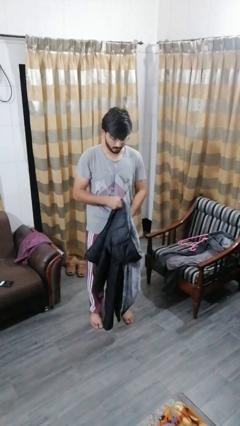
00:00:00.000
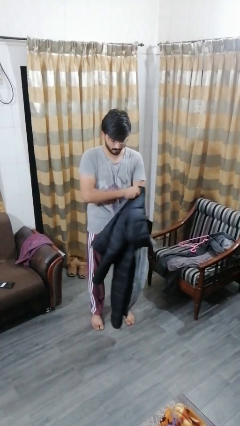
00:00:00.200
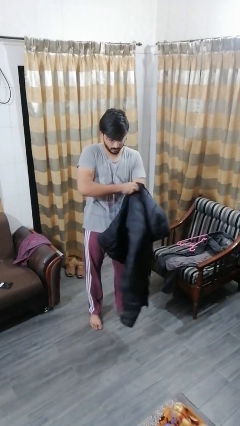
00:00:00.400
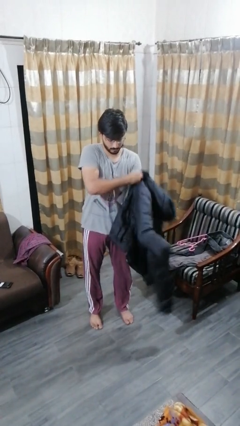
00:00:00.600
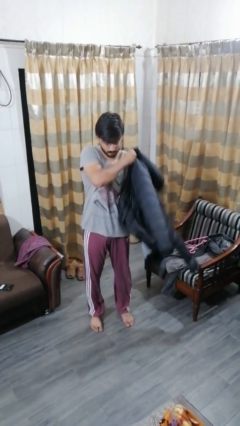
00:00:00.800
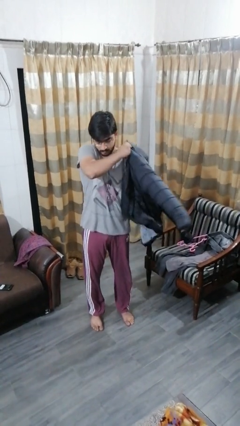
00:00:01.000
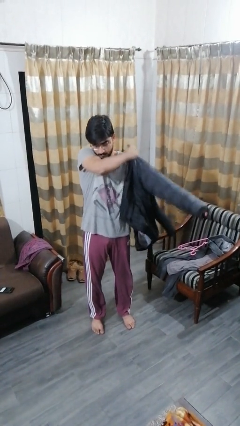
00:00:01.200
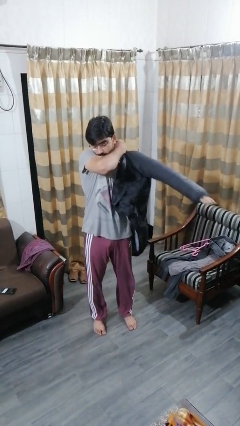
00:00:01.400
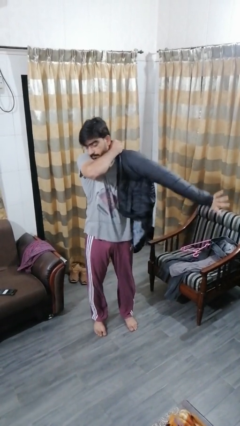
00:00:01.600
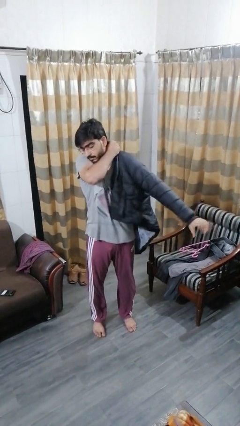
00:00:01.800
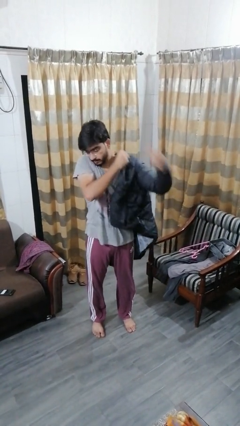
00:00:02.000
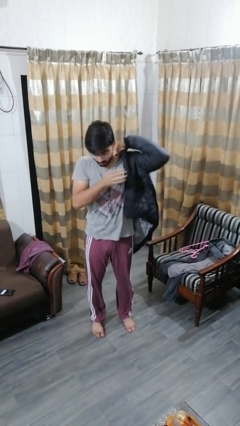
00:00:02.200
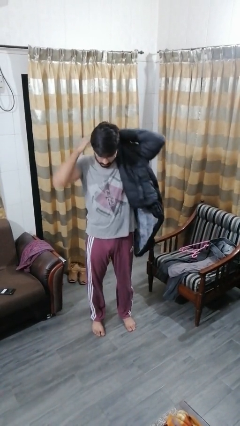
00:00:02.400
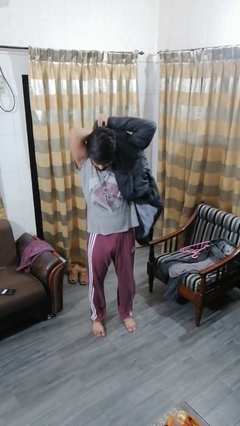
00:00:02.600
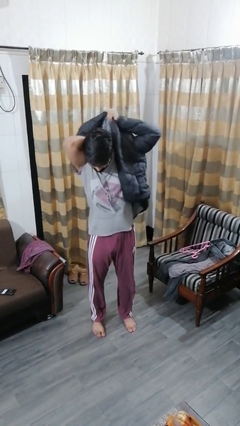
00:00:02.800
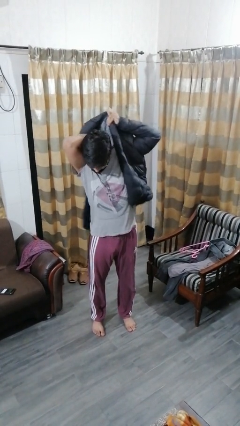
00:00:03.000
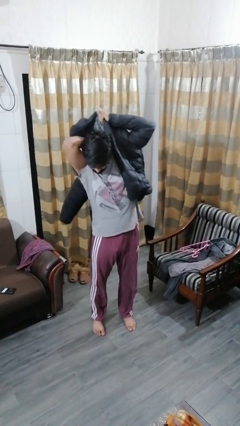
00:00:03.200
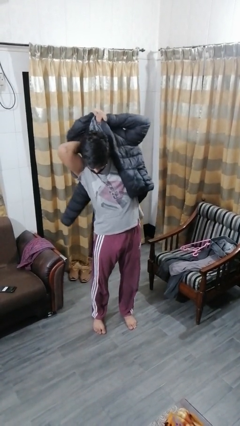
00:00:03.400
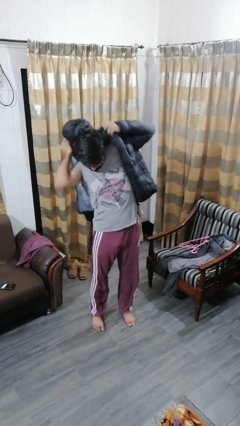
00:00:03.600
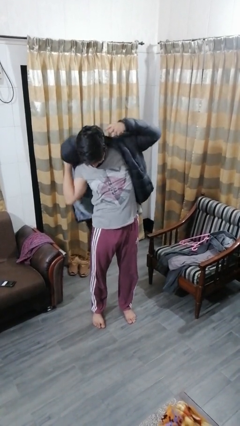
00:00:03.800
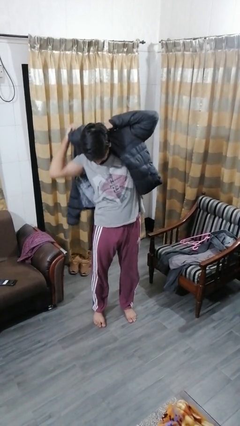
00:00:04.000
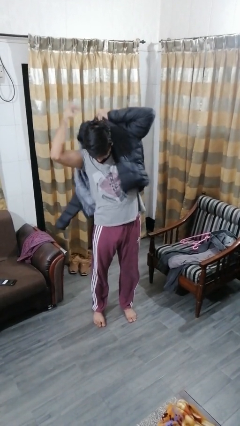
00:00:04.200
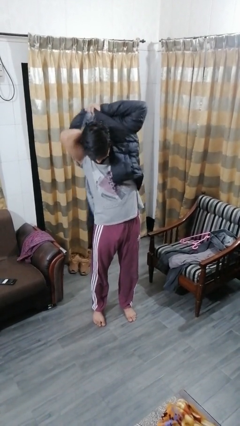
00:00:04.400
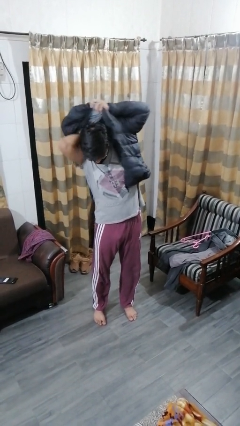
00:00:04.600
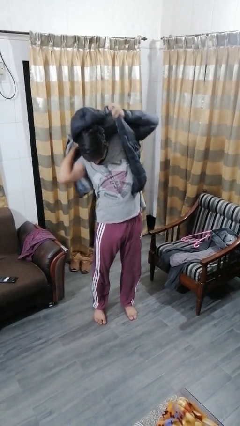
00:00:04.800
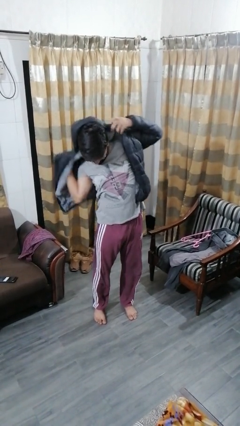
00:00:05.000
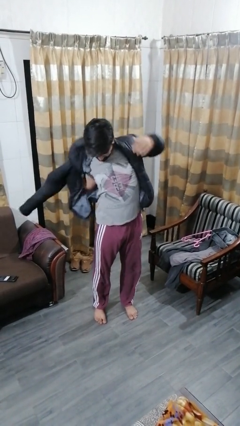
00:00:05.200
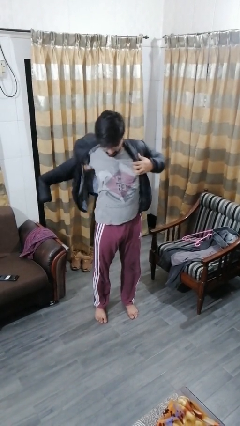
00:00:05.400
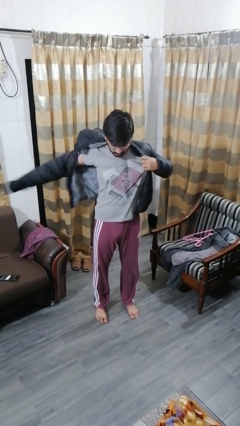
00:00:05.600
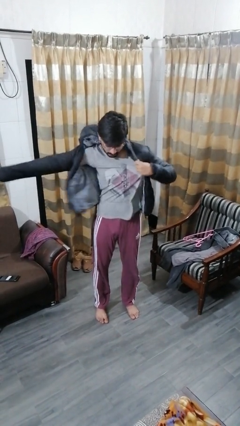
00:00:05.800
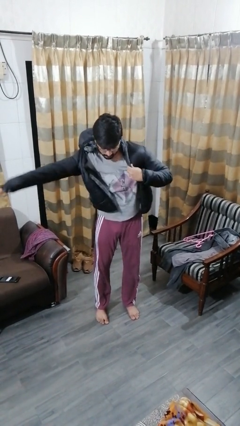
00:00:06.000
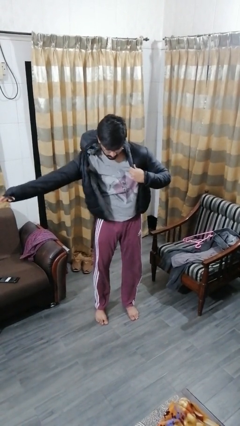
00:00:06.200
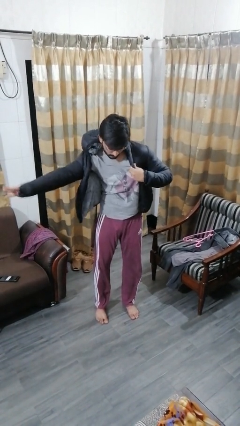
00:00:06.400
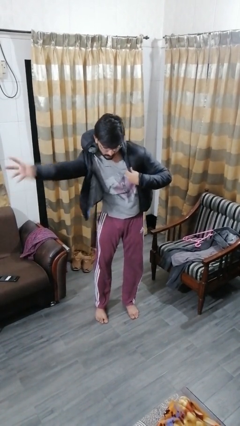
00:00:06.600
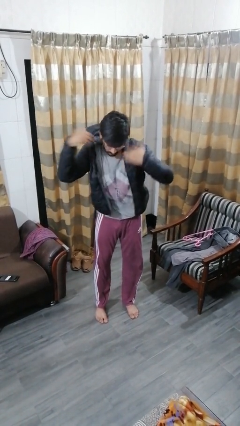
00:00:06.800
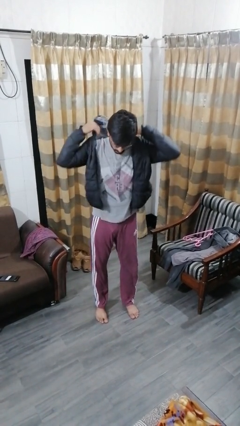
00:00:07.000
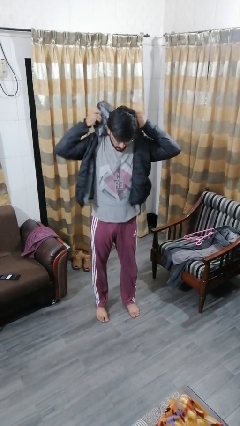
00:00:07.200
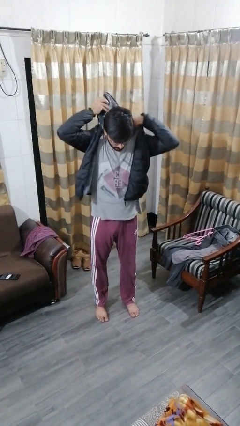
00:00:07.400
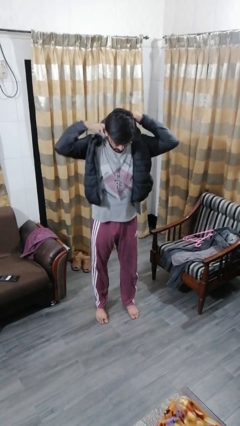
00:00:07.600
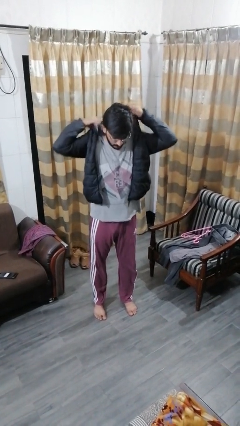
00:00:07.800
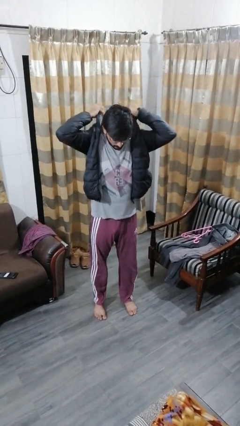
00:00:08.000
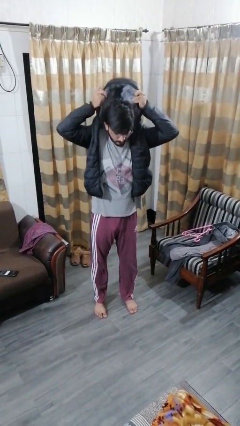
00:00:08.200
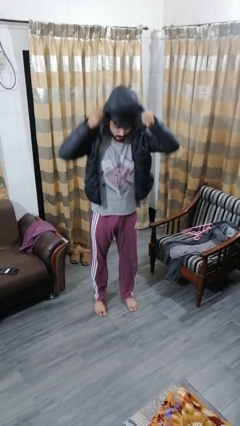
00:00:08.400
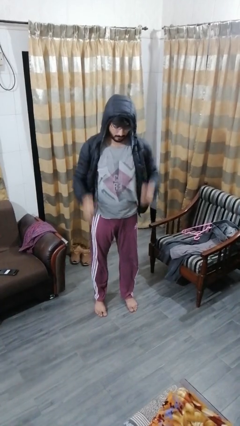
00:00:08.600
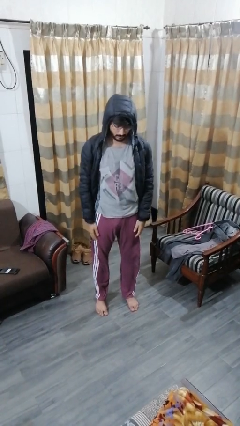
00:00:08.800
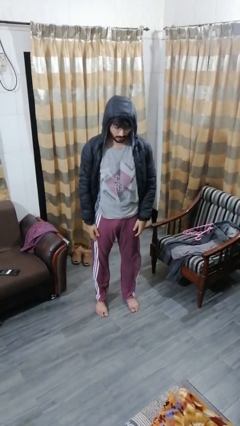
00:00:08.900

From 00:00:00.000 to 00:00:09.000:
person puts on hoodie

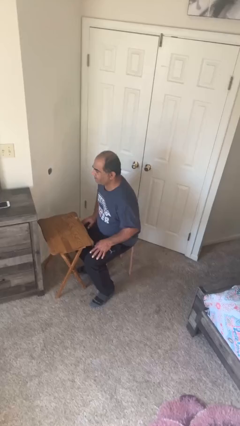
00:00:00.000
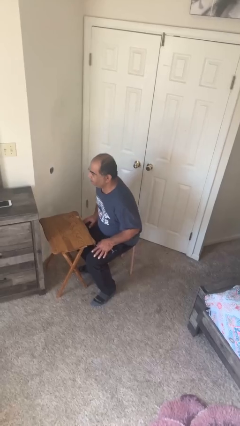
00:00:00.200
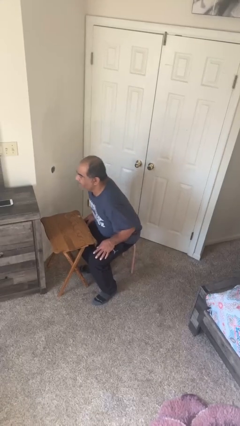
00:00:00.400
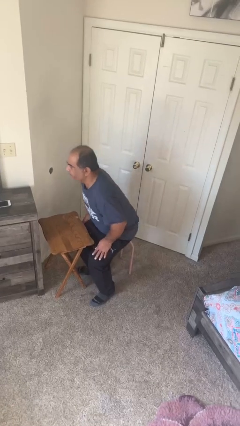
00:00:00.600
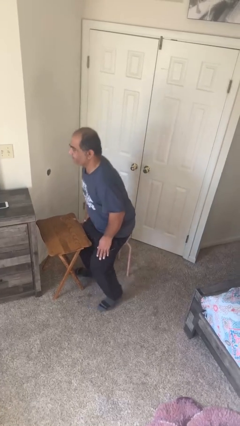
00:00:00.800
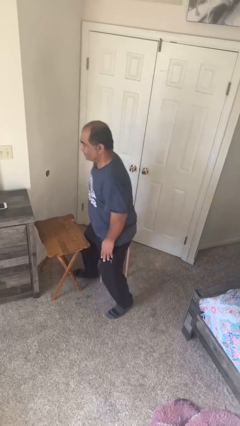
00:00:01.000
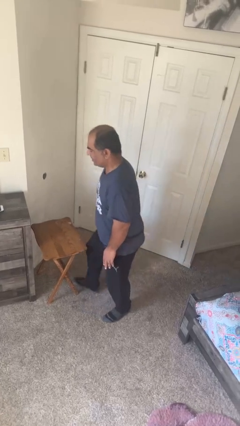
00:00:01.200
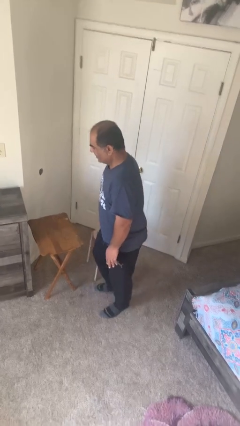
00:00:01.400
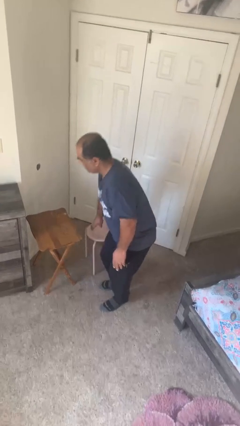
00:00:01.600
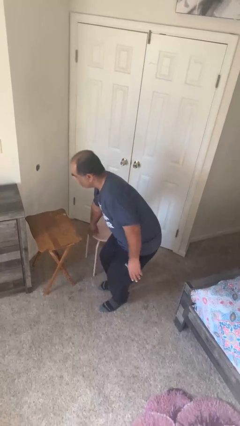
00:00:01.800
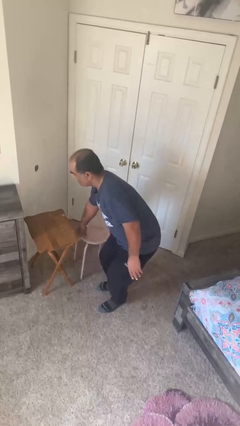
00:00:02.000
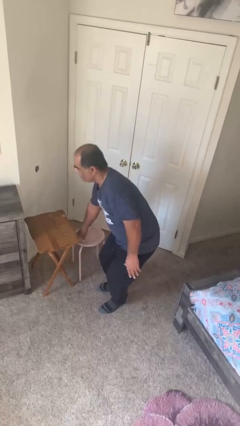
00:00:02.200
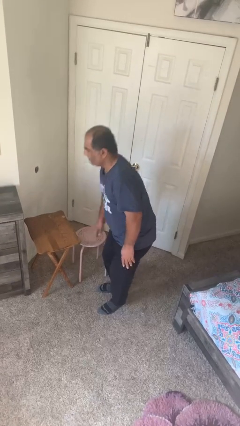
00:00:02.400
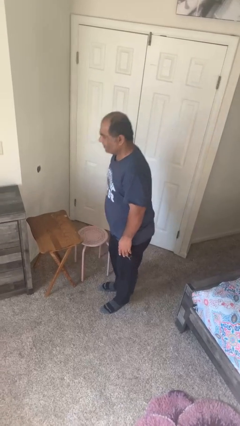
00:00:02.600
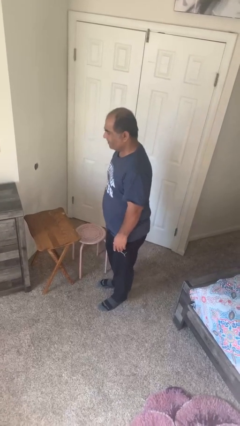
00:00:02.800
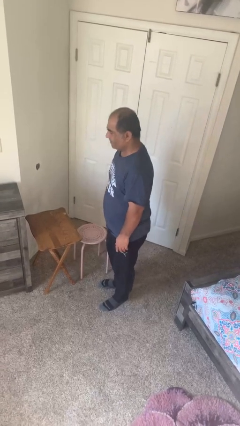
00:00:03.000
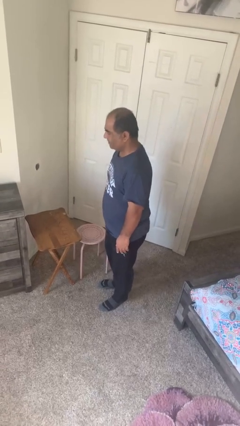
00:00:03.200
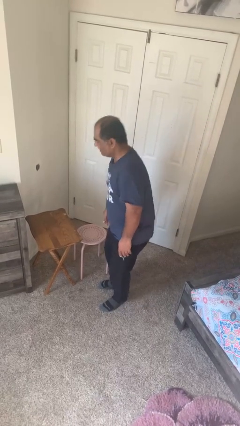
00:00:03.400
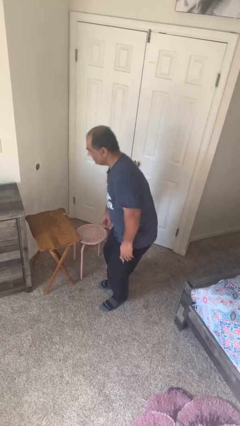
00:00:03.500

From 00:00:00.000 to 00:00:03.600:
person stands up

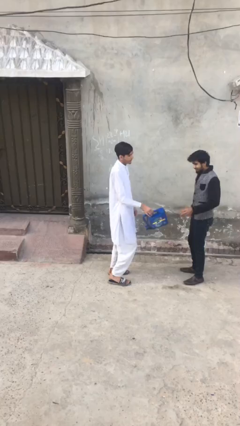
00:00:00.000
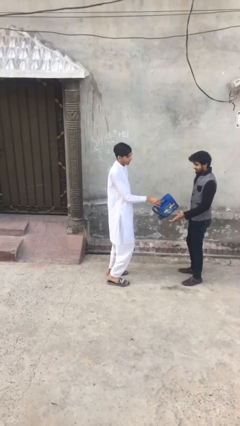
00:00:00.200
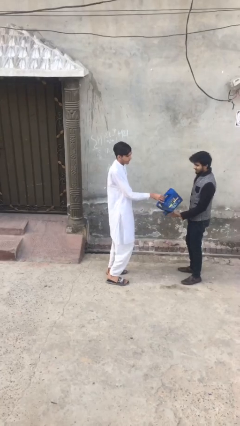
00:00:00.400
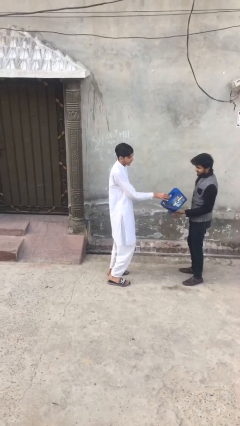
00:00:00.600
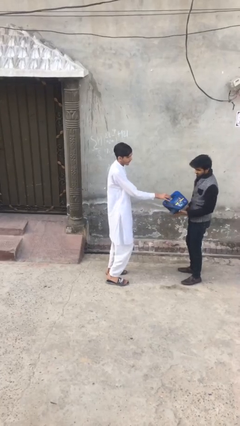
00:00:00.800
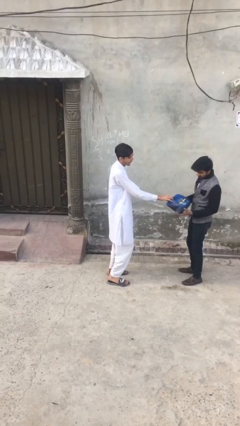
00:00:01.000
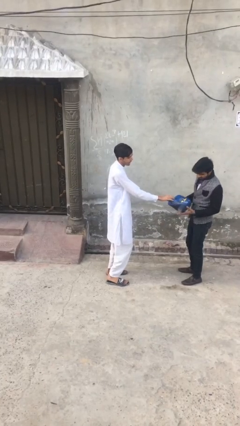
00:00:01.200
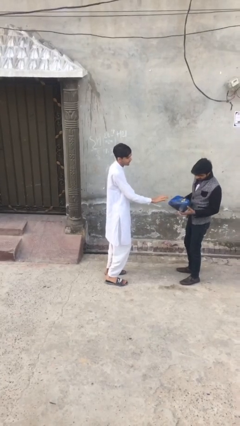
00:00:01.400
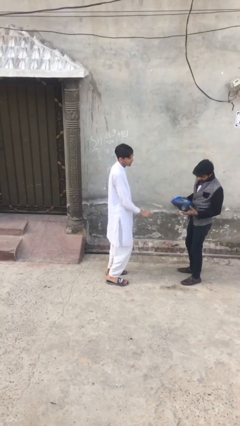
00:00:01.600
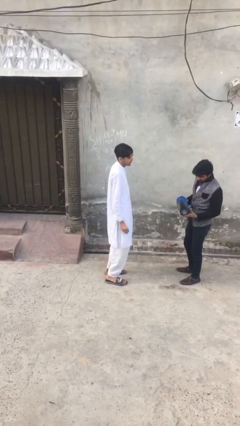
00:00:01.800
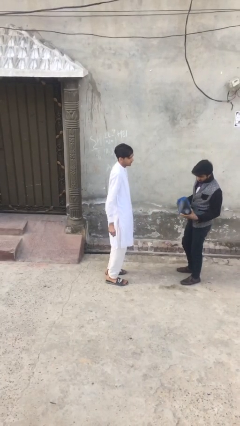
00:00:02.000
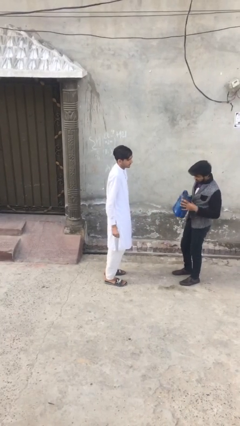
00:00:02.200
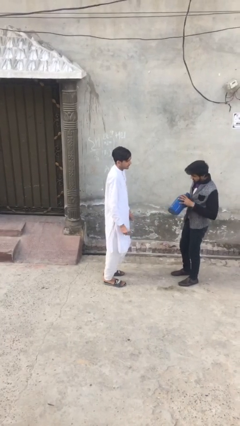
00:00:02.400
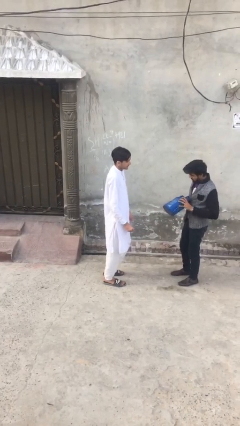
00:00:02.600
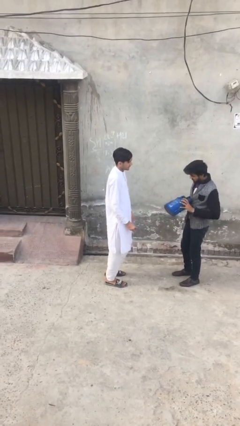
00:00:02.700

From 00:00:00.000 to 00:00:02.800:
person transfers object to person

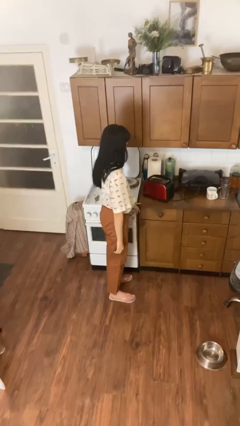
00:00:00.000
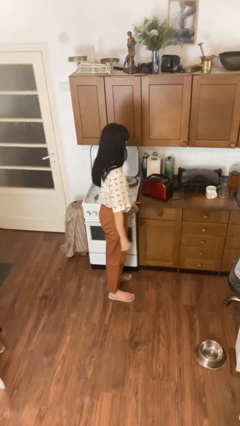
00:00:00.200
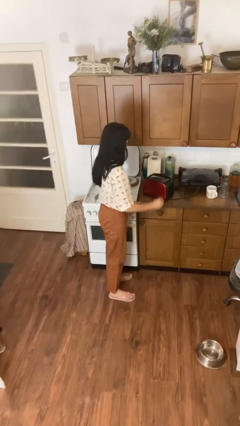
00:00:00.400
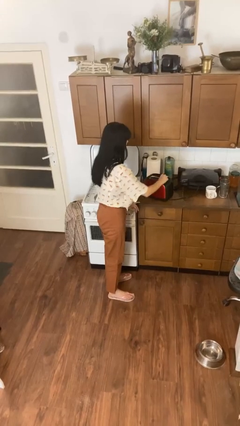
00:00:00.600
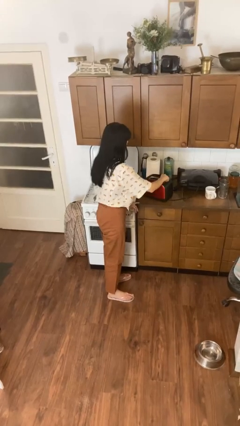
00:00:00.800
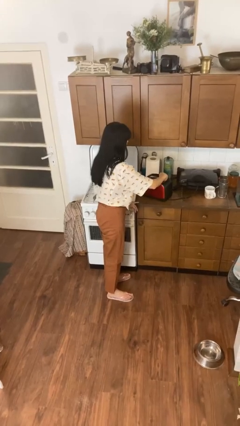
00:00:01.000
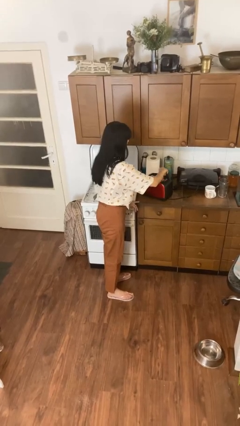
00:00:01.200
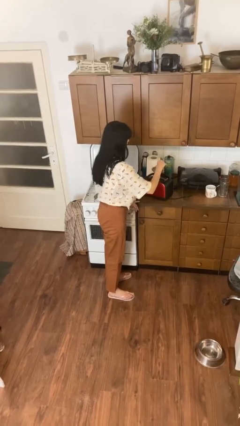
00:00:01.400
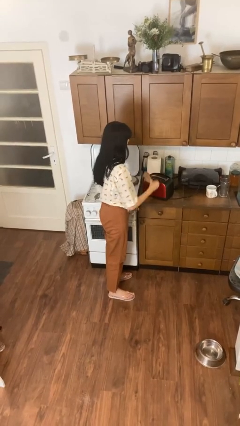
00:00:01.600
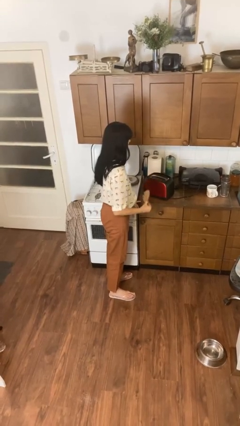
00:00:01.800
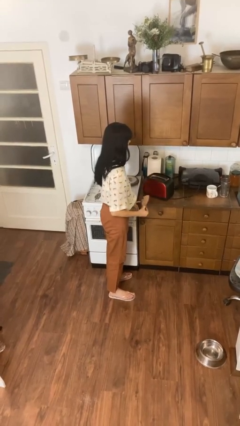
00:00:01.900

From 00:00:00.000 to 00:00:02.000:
person takes object from toaster

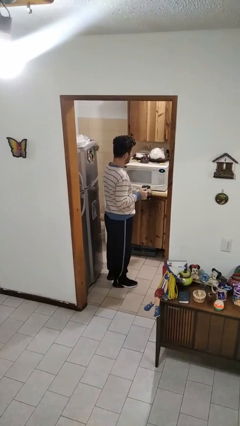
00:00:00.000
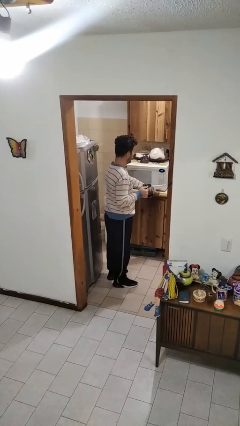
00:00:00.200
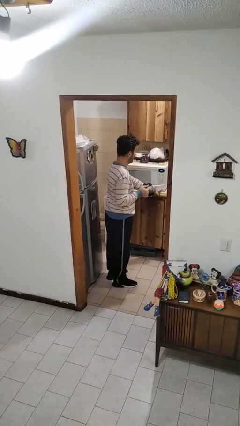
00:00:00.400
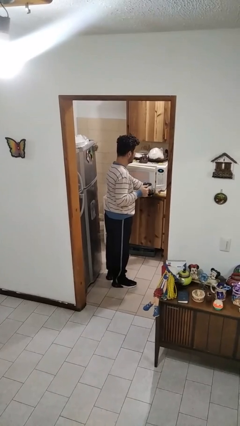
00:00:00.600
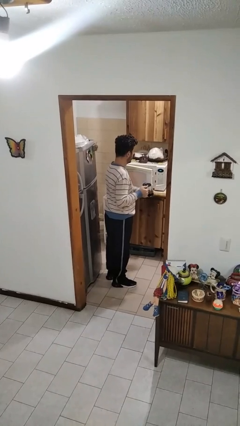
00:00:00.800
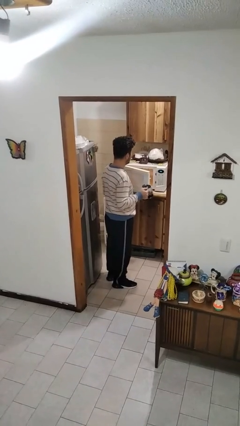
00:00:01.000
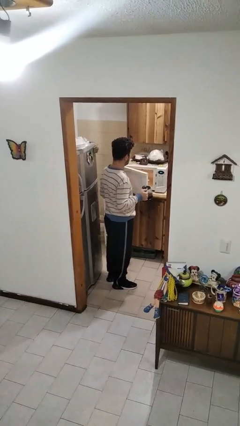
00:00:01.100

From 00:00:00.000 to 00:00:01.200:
person opens microwave
